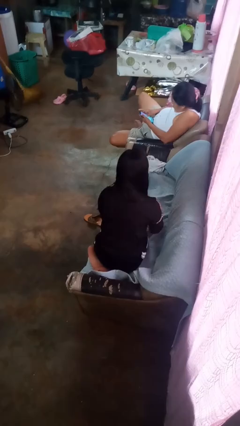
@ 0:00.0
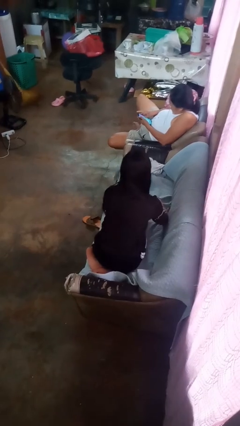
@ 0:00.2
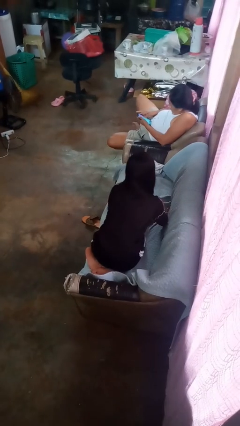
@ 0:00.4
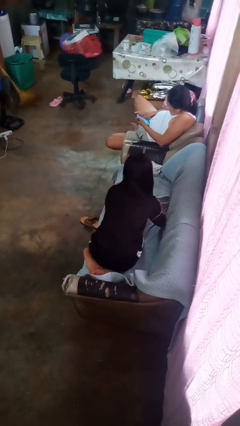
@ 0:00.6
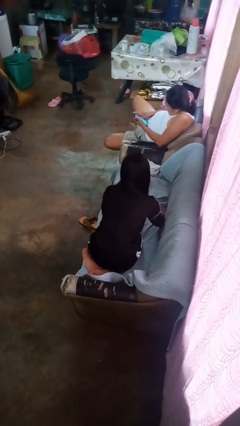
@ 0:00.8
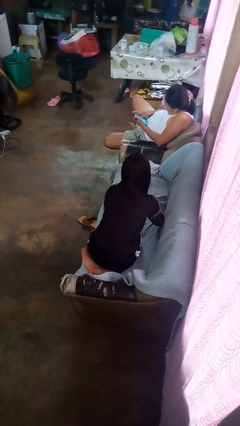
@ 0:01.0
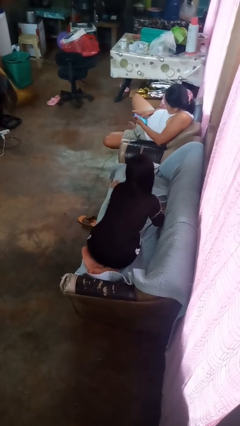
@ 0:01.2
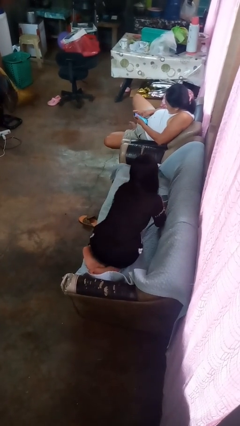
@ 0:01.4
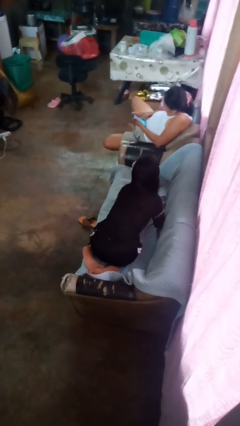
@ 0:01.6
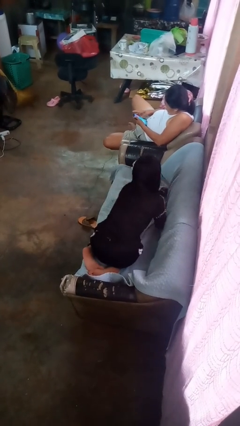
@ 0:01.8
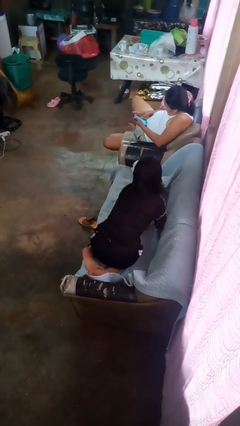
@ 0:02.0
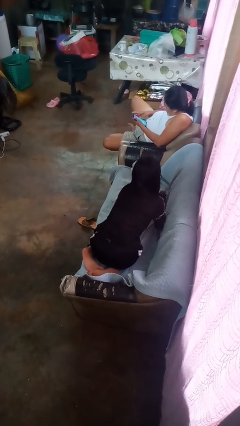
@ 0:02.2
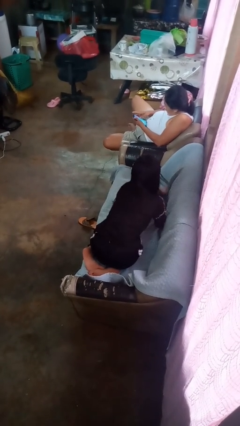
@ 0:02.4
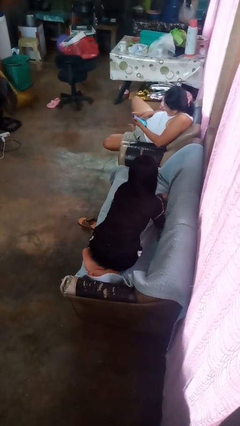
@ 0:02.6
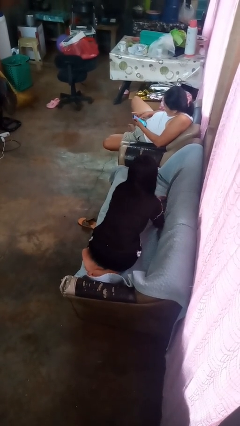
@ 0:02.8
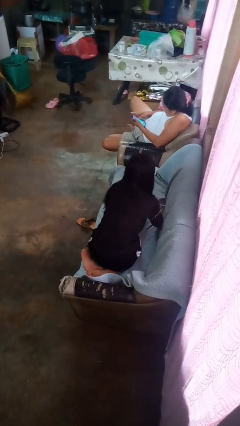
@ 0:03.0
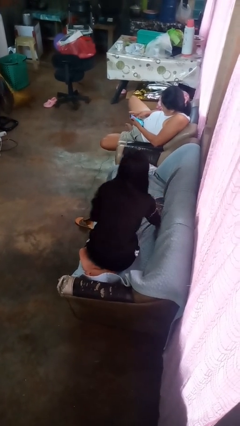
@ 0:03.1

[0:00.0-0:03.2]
person searches in couch

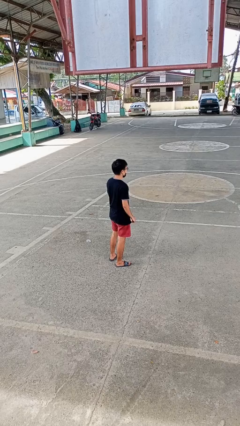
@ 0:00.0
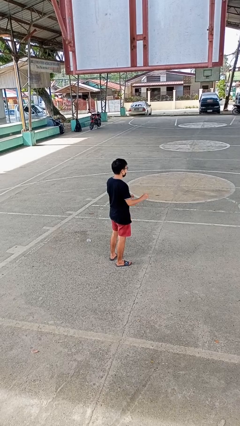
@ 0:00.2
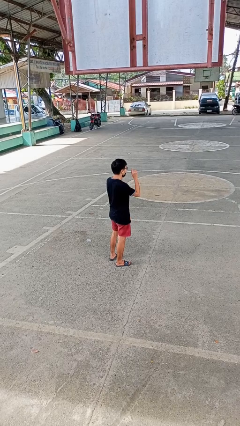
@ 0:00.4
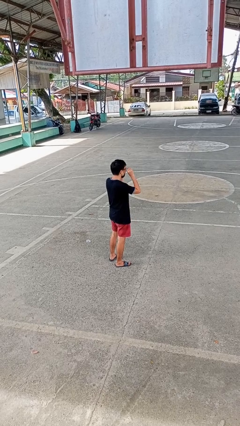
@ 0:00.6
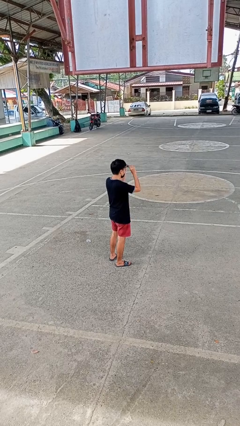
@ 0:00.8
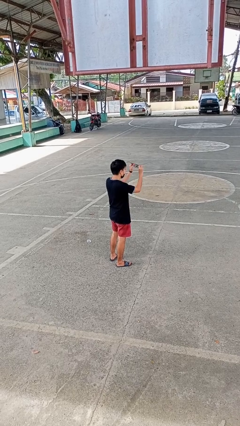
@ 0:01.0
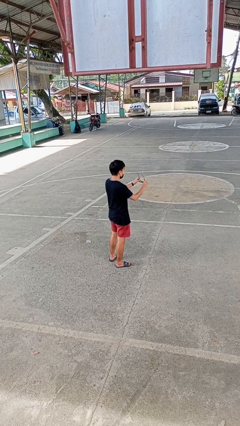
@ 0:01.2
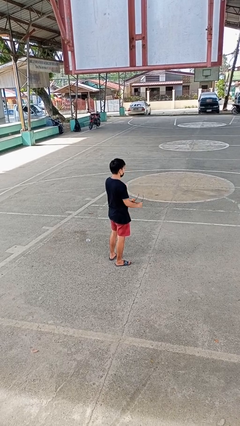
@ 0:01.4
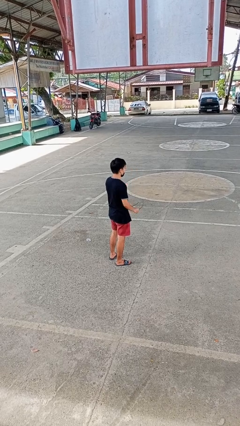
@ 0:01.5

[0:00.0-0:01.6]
person takes off glasses

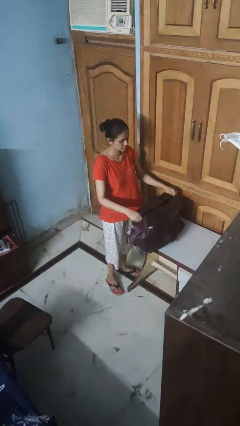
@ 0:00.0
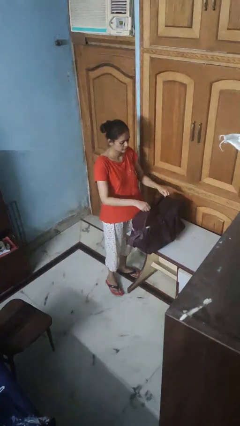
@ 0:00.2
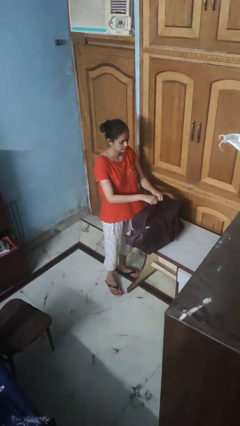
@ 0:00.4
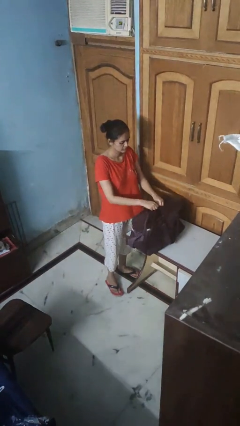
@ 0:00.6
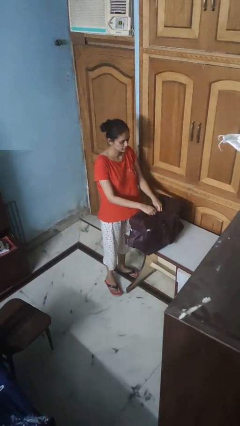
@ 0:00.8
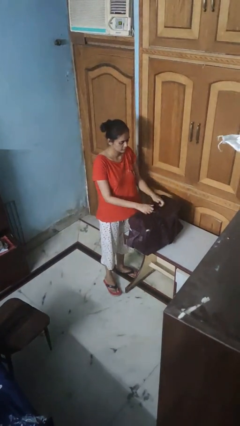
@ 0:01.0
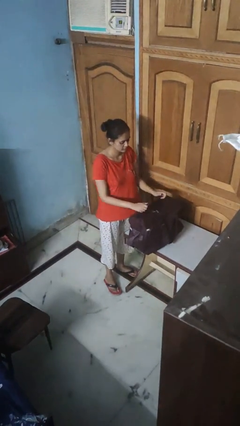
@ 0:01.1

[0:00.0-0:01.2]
person closes suitcase

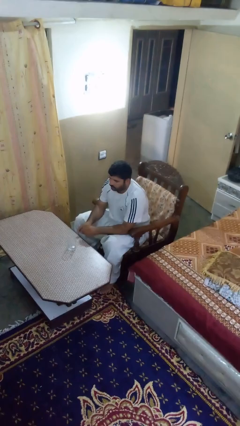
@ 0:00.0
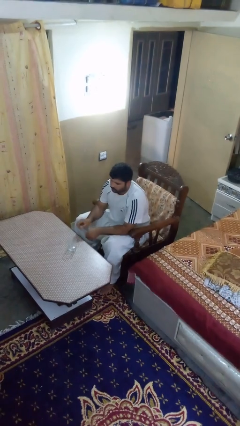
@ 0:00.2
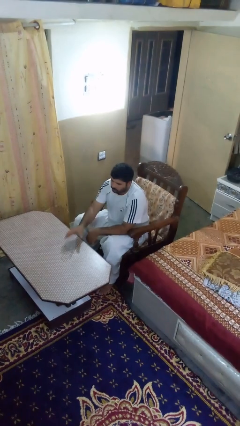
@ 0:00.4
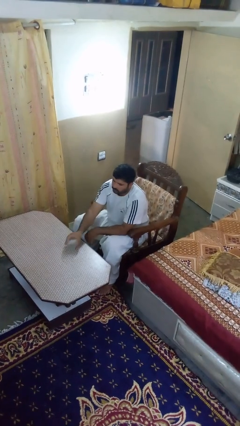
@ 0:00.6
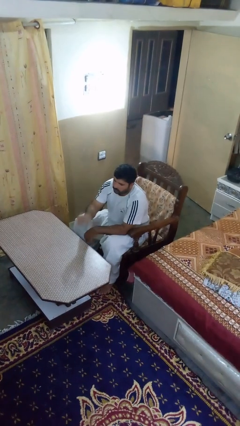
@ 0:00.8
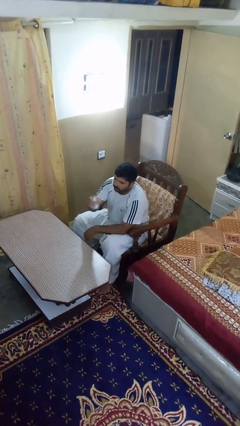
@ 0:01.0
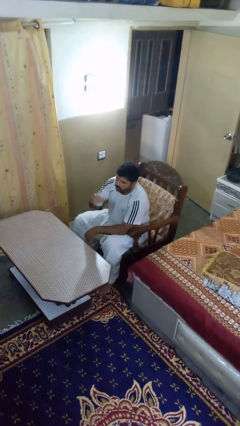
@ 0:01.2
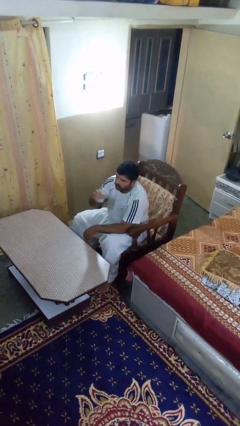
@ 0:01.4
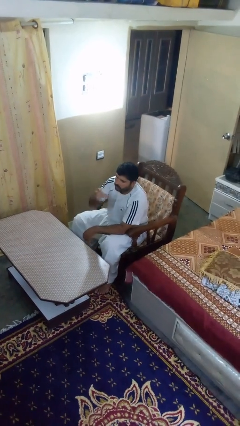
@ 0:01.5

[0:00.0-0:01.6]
person picks up object from table

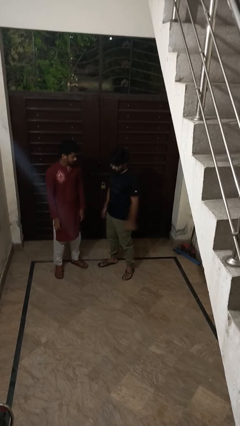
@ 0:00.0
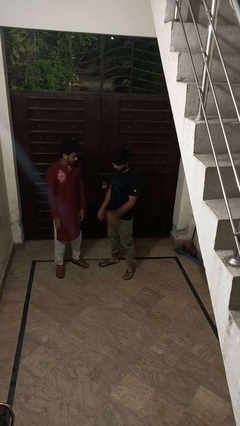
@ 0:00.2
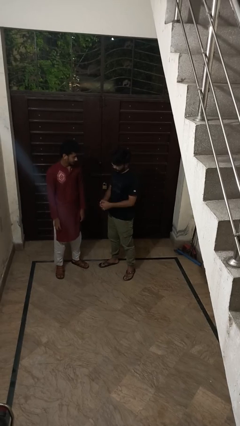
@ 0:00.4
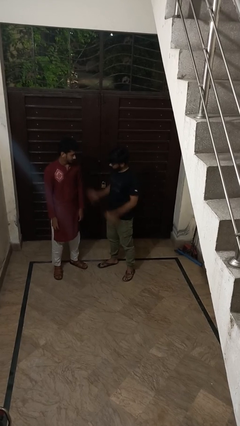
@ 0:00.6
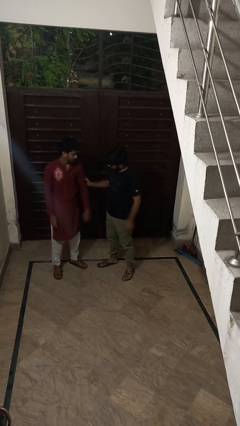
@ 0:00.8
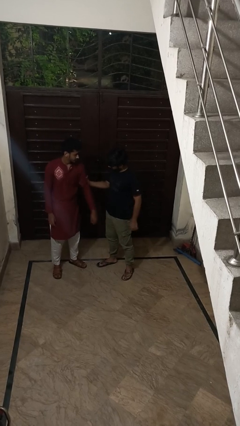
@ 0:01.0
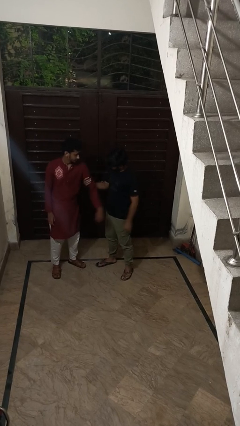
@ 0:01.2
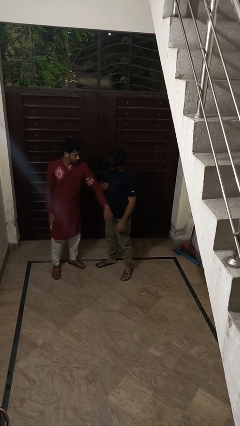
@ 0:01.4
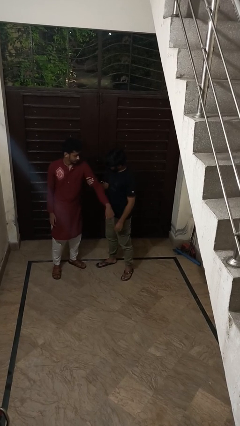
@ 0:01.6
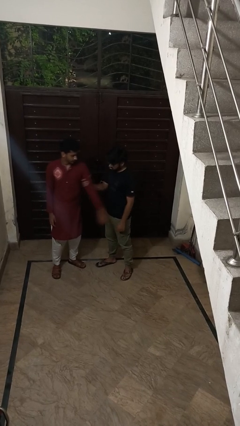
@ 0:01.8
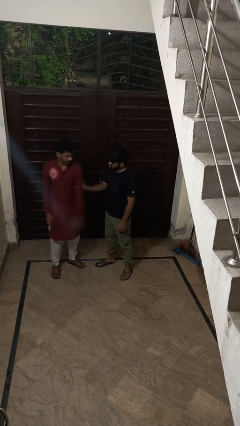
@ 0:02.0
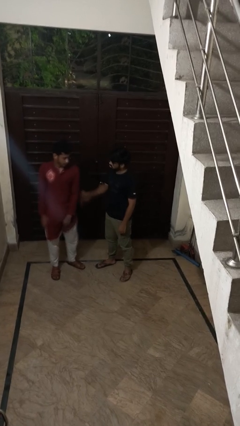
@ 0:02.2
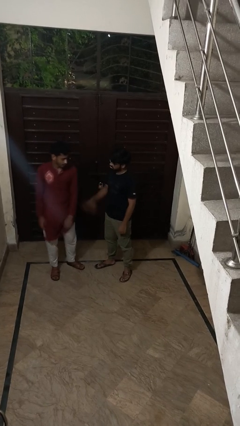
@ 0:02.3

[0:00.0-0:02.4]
person grabs person by bicep

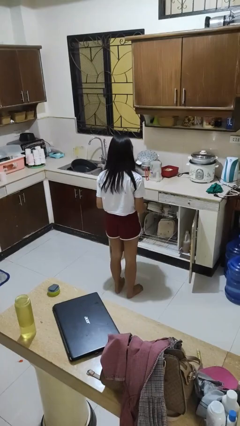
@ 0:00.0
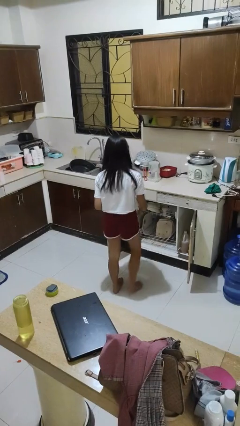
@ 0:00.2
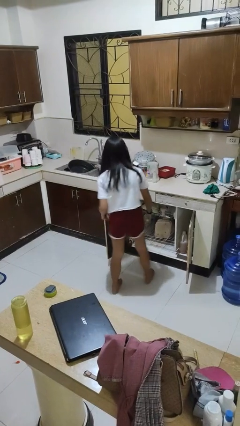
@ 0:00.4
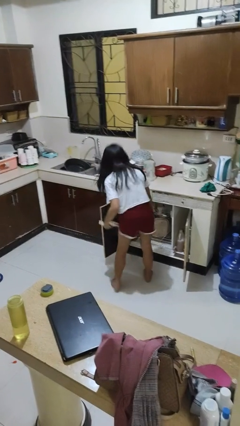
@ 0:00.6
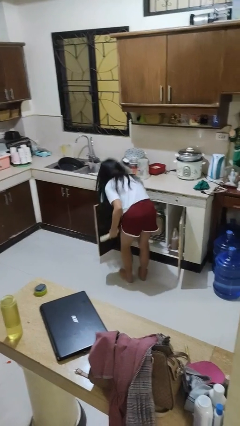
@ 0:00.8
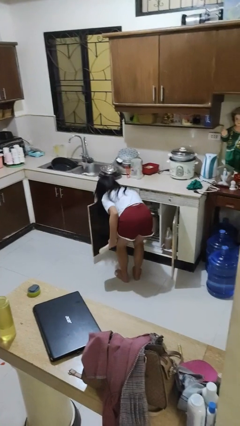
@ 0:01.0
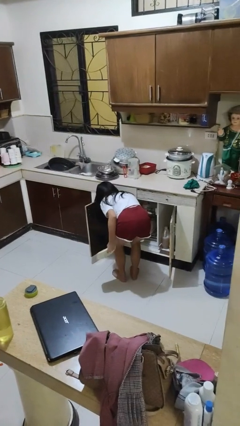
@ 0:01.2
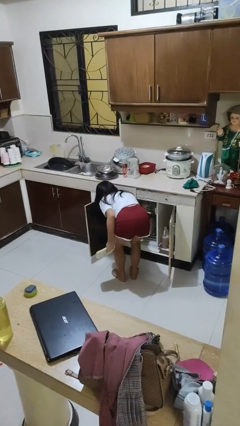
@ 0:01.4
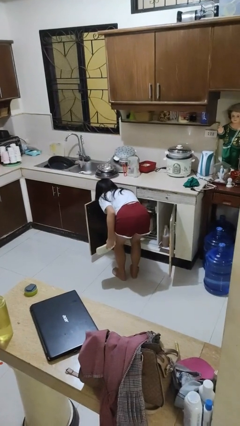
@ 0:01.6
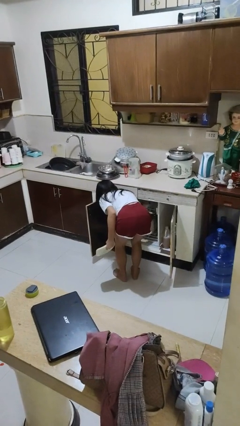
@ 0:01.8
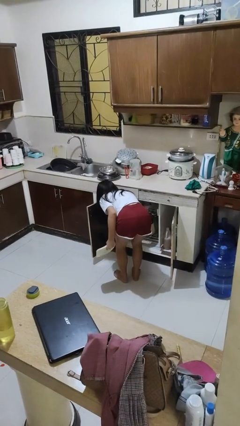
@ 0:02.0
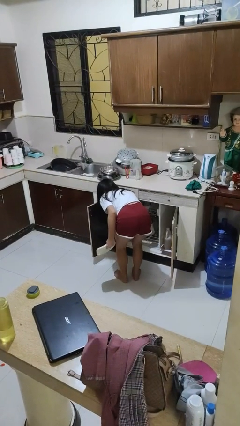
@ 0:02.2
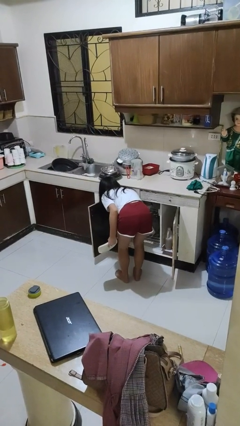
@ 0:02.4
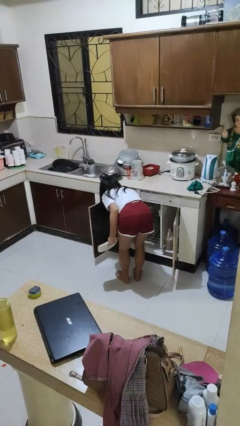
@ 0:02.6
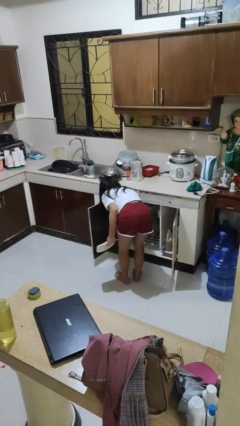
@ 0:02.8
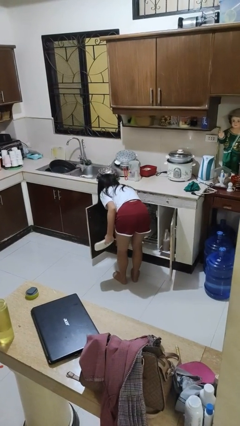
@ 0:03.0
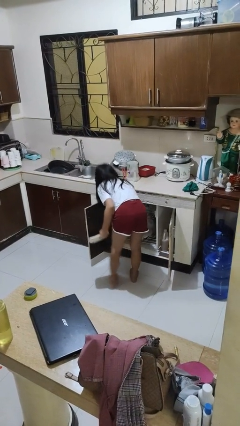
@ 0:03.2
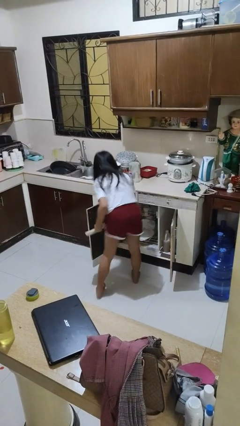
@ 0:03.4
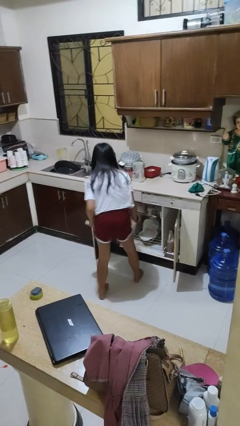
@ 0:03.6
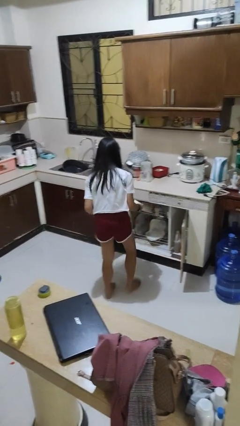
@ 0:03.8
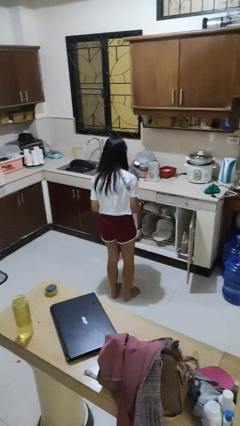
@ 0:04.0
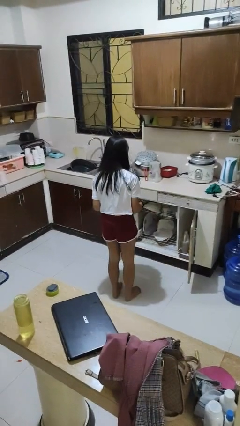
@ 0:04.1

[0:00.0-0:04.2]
person unloads dishwasher

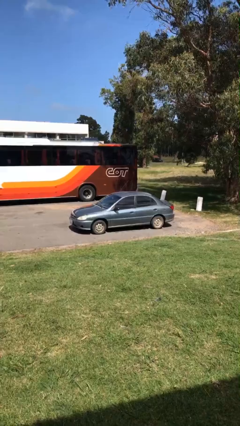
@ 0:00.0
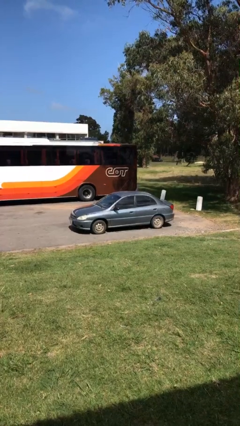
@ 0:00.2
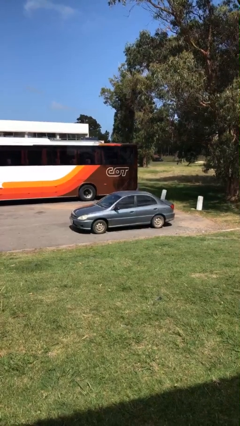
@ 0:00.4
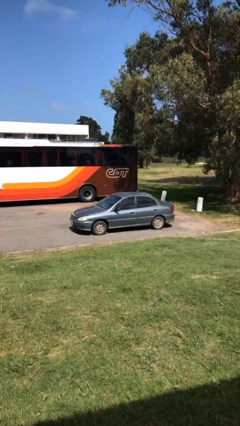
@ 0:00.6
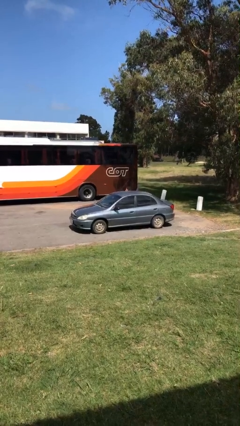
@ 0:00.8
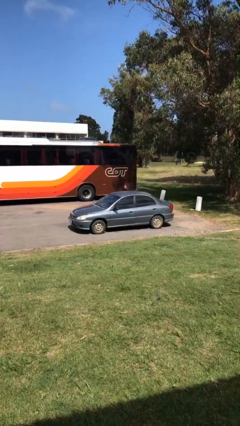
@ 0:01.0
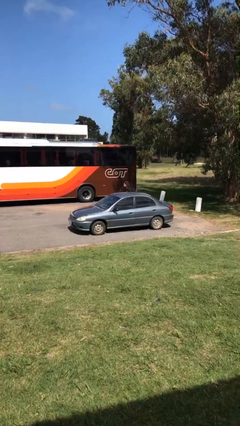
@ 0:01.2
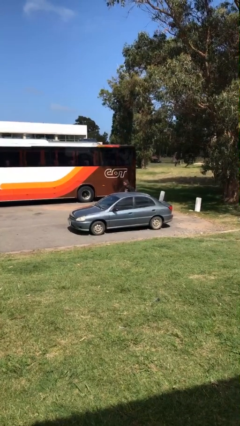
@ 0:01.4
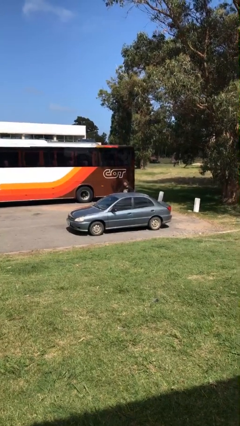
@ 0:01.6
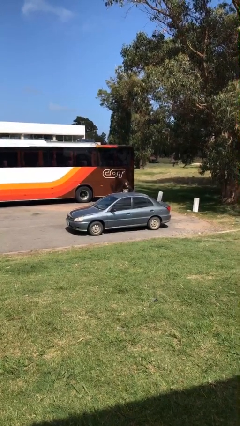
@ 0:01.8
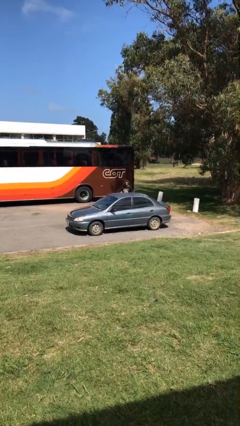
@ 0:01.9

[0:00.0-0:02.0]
car drops off person

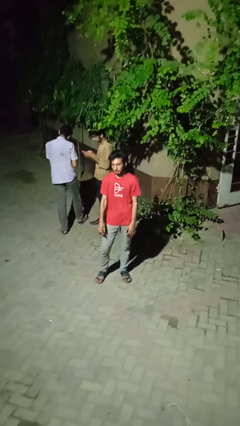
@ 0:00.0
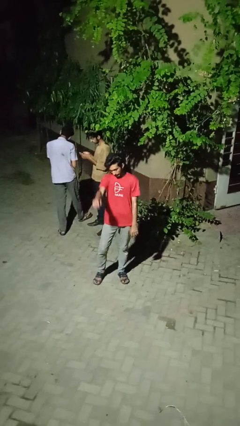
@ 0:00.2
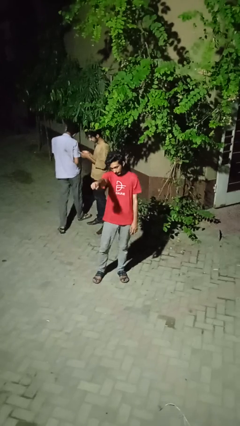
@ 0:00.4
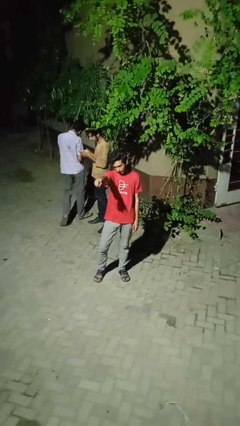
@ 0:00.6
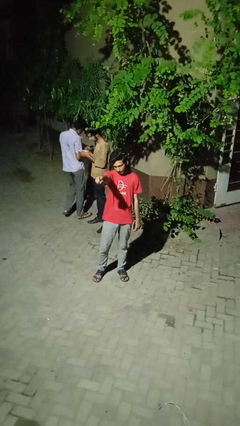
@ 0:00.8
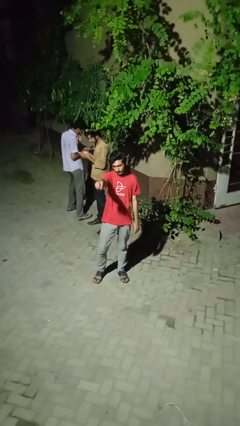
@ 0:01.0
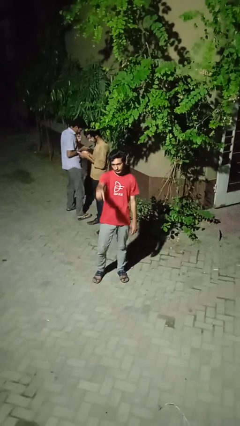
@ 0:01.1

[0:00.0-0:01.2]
person points at person
